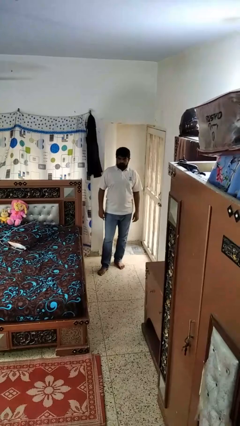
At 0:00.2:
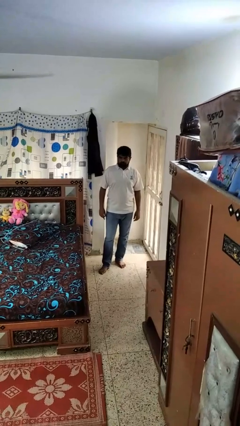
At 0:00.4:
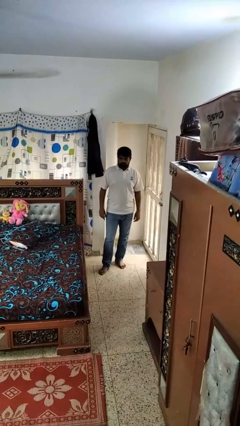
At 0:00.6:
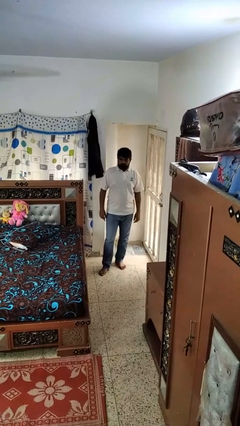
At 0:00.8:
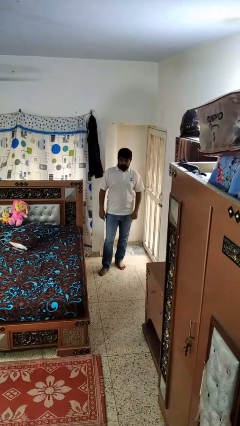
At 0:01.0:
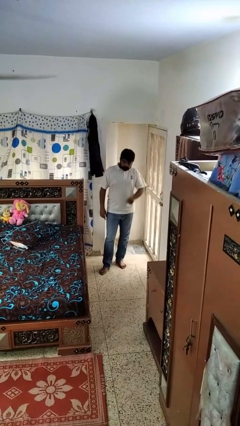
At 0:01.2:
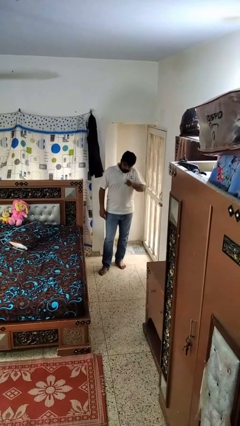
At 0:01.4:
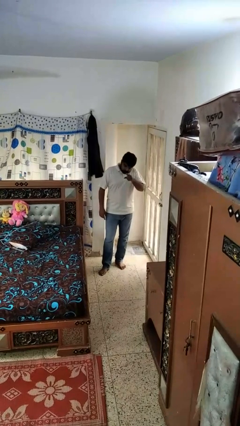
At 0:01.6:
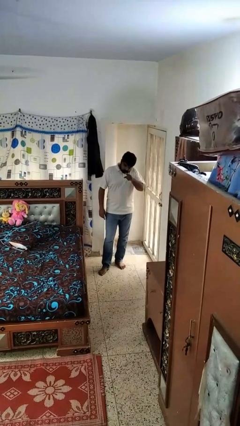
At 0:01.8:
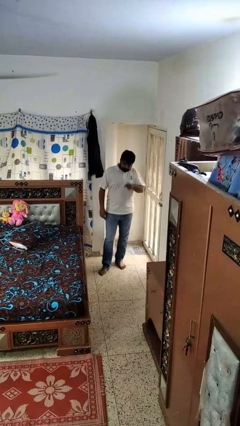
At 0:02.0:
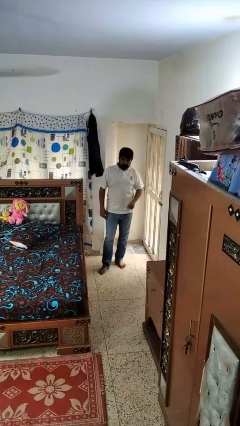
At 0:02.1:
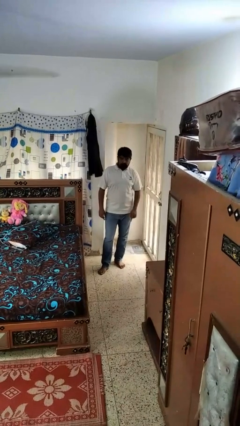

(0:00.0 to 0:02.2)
person points at person

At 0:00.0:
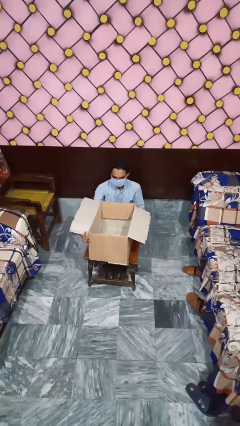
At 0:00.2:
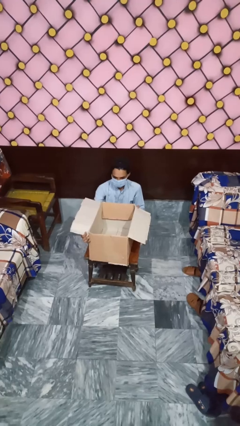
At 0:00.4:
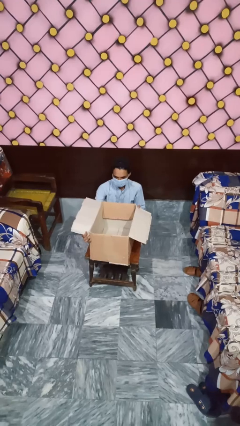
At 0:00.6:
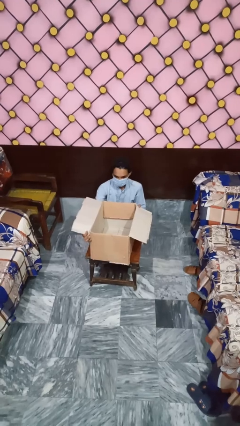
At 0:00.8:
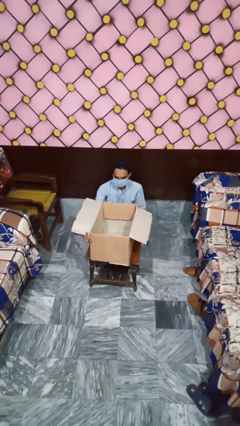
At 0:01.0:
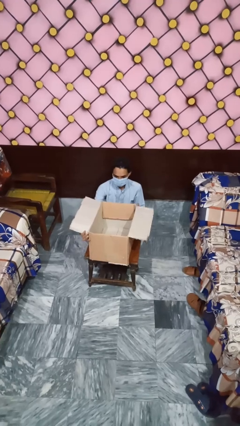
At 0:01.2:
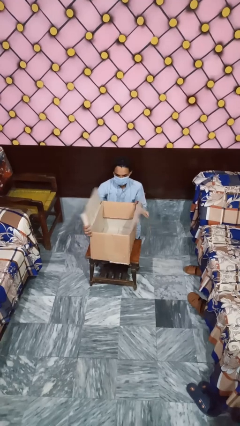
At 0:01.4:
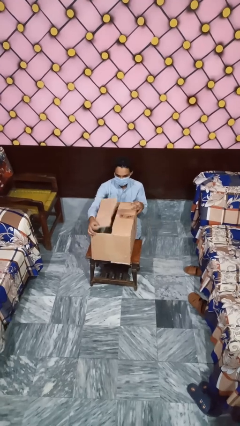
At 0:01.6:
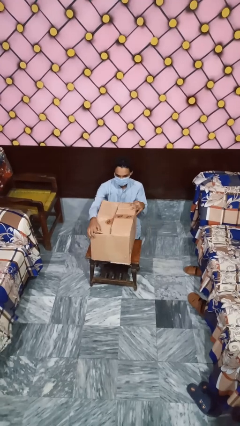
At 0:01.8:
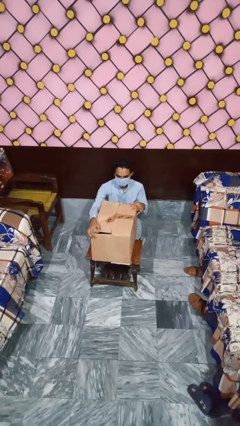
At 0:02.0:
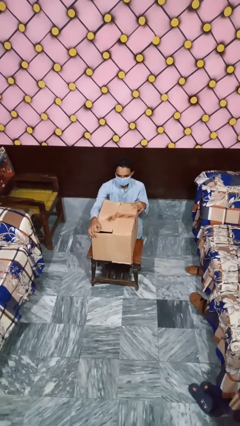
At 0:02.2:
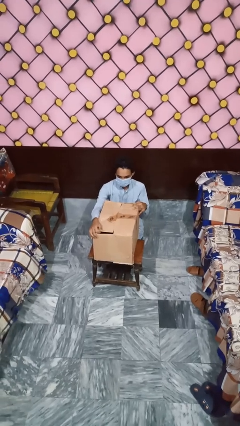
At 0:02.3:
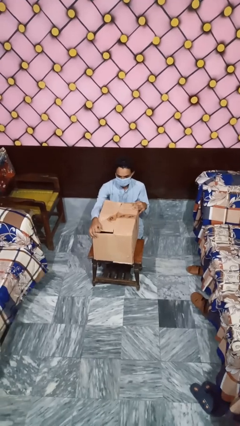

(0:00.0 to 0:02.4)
person closes box

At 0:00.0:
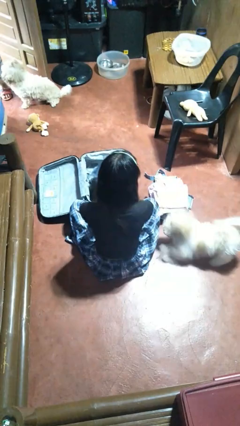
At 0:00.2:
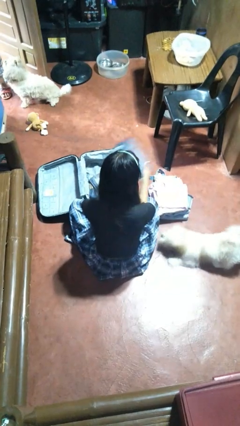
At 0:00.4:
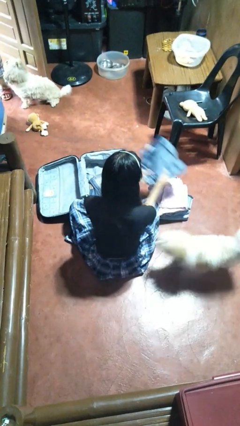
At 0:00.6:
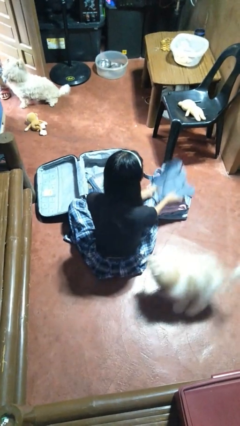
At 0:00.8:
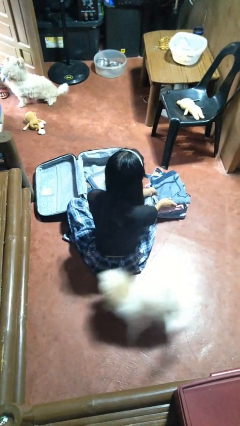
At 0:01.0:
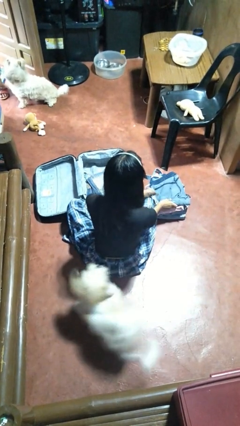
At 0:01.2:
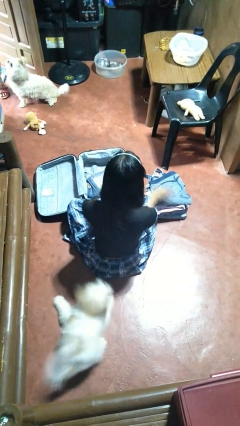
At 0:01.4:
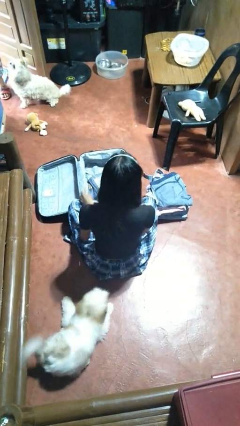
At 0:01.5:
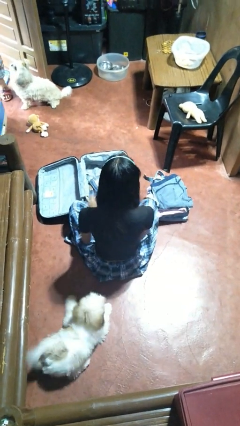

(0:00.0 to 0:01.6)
person unloads clothes from suitcase

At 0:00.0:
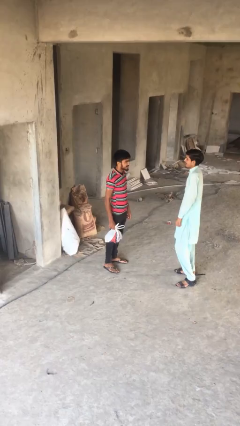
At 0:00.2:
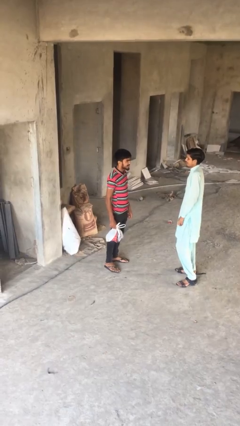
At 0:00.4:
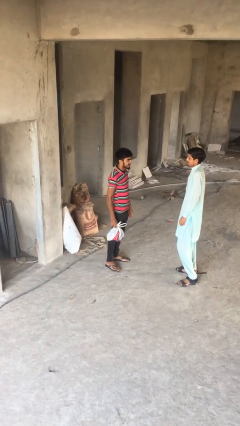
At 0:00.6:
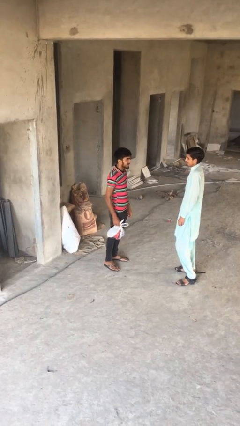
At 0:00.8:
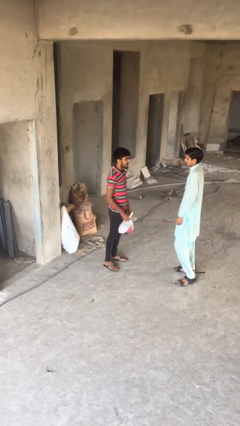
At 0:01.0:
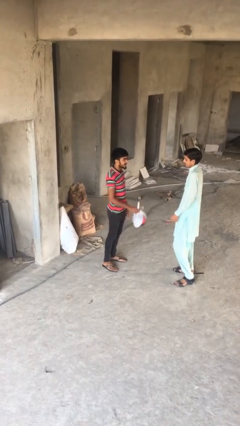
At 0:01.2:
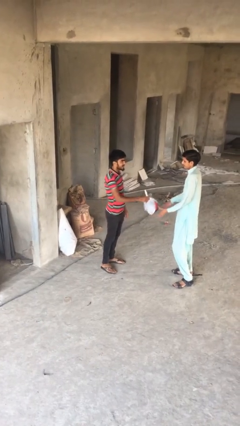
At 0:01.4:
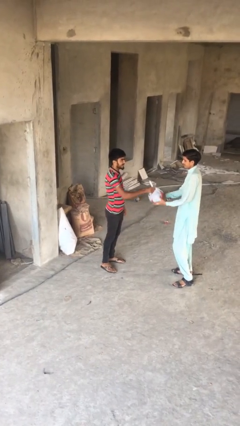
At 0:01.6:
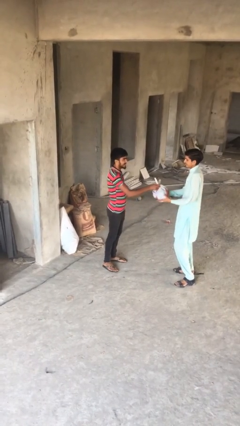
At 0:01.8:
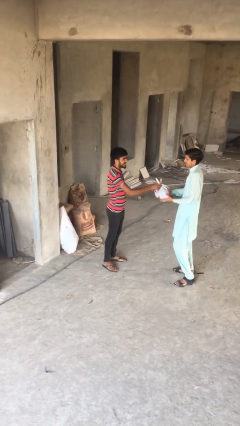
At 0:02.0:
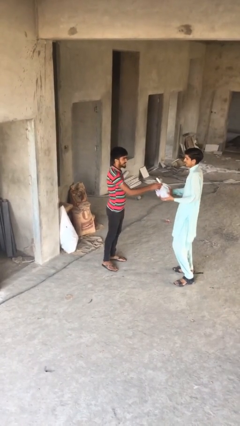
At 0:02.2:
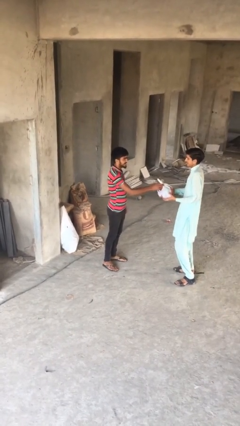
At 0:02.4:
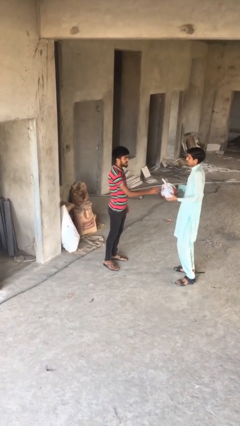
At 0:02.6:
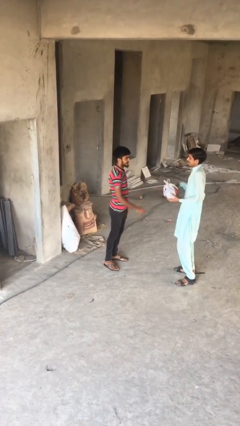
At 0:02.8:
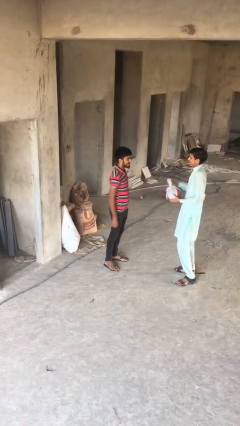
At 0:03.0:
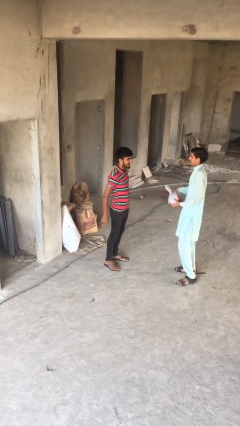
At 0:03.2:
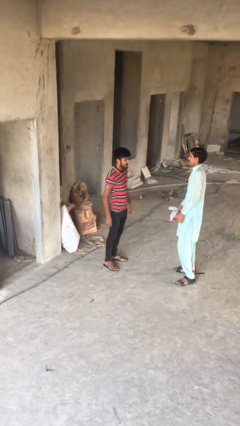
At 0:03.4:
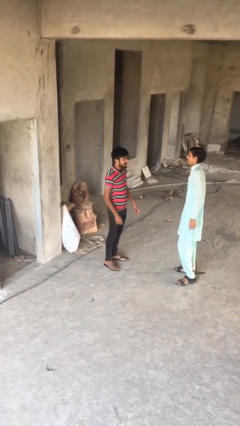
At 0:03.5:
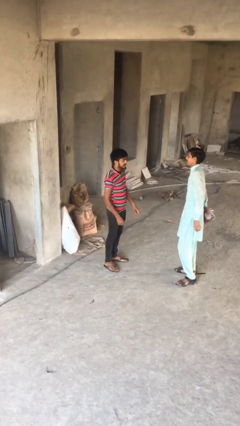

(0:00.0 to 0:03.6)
person transfers object to person

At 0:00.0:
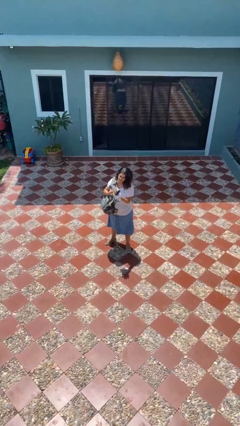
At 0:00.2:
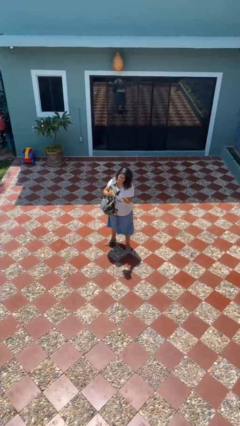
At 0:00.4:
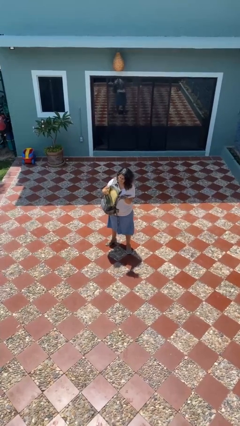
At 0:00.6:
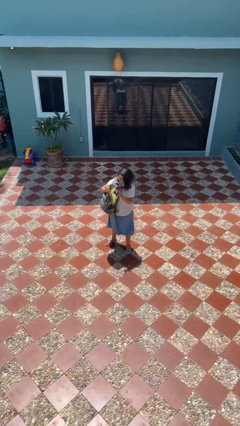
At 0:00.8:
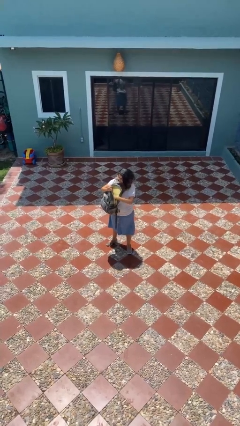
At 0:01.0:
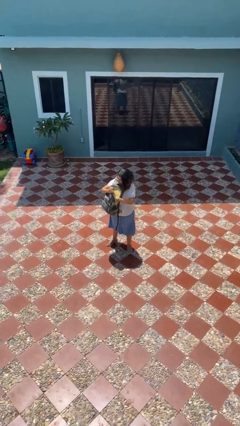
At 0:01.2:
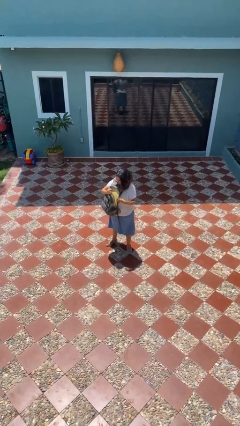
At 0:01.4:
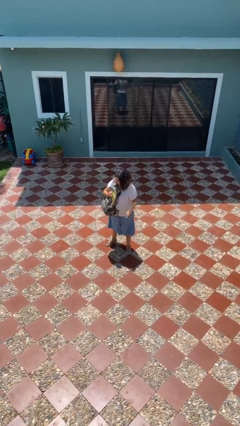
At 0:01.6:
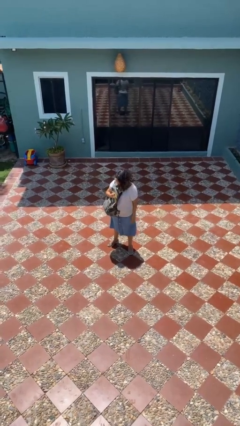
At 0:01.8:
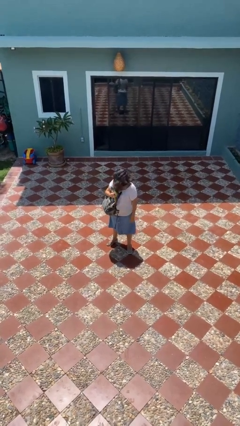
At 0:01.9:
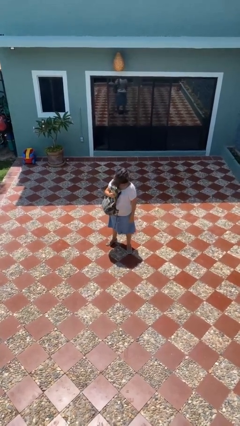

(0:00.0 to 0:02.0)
person puts object into backpack

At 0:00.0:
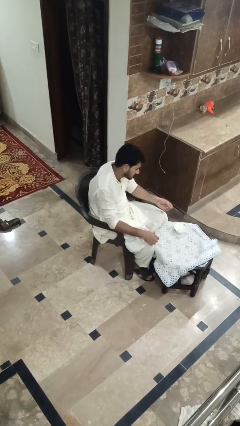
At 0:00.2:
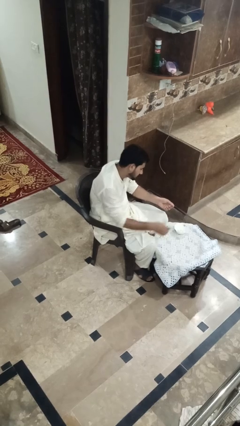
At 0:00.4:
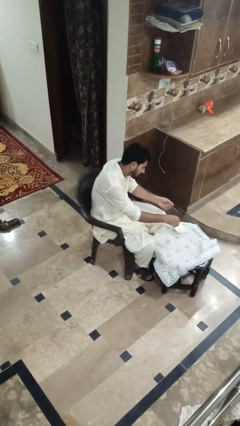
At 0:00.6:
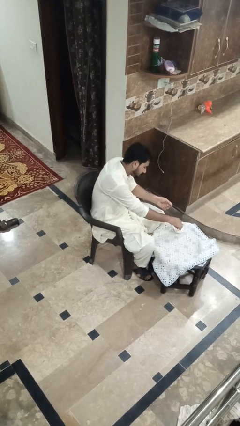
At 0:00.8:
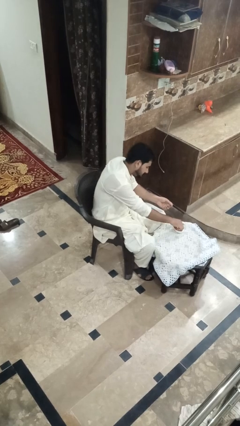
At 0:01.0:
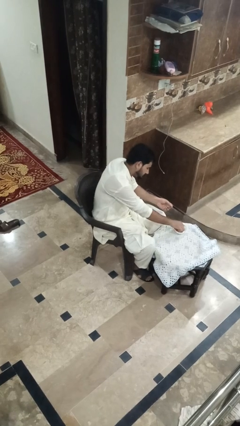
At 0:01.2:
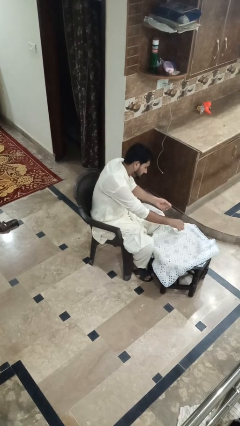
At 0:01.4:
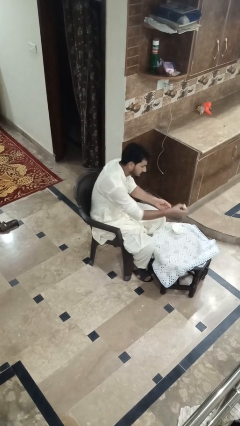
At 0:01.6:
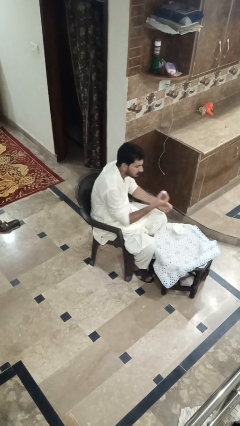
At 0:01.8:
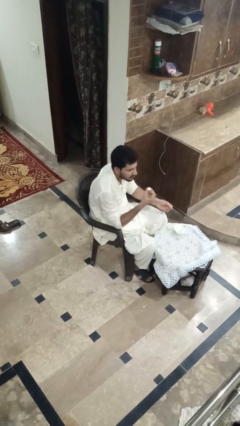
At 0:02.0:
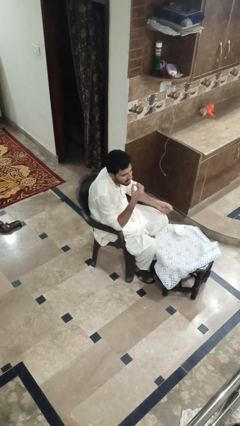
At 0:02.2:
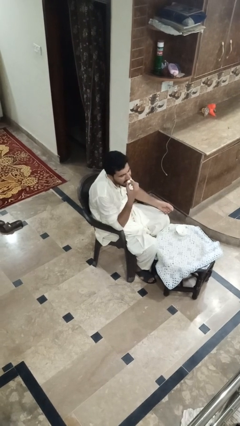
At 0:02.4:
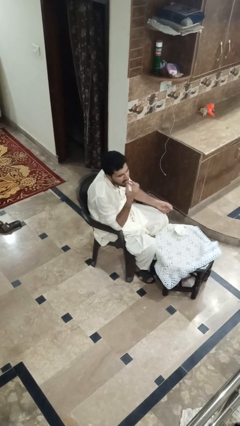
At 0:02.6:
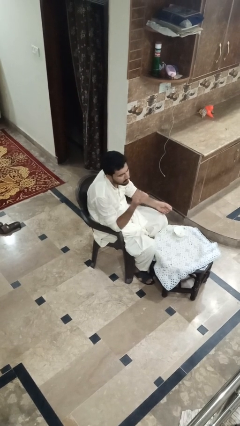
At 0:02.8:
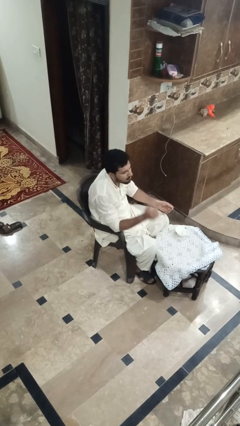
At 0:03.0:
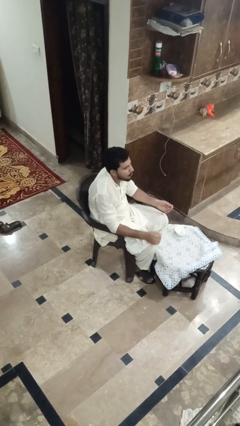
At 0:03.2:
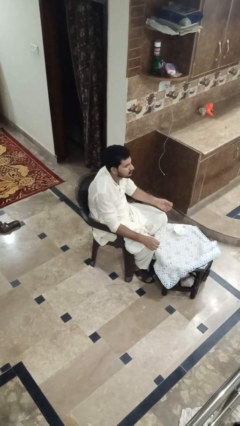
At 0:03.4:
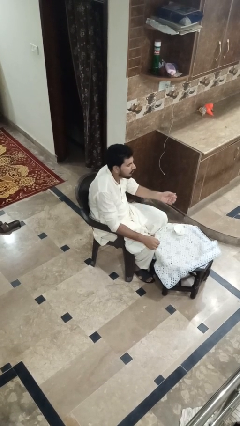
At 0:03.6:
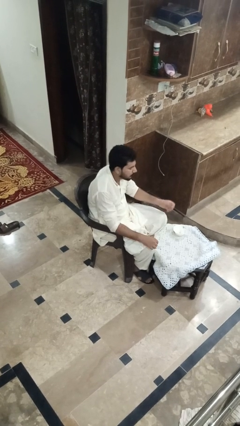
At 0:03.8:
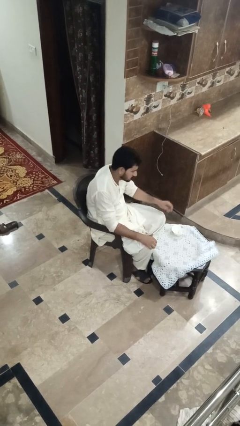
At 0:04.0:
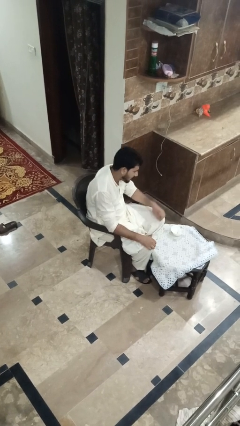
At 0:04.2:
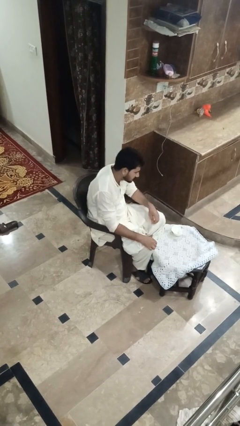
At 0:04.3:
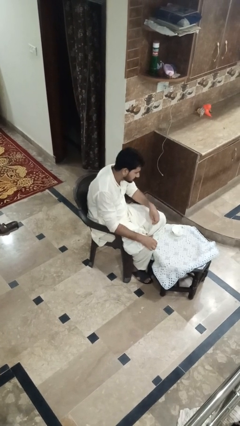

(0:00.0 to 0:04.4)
person eats with hands

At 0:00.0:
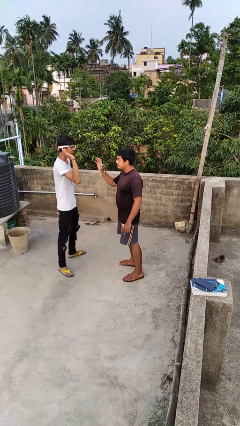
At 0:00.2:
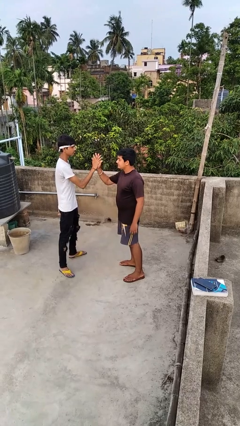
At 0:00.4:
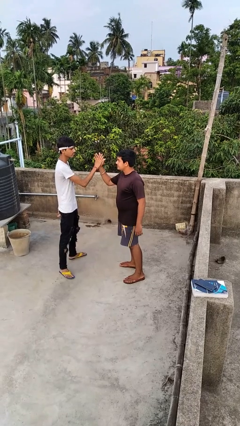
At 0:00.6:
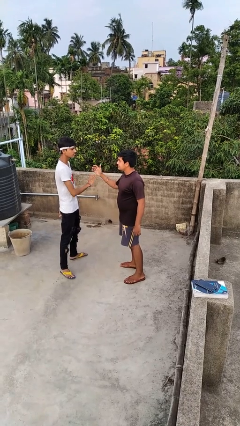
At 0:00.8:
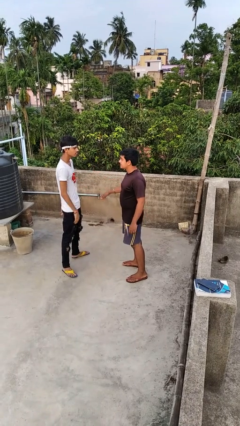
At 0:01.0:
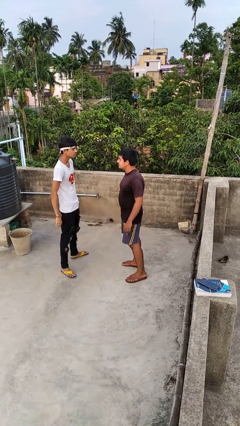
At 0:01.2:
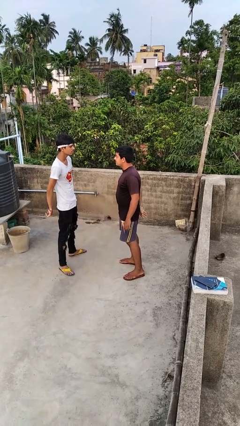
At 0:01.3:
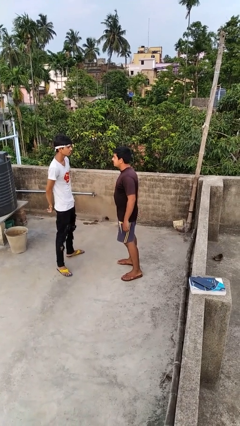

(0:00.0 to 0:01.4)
person highfives hand
